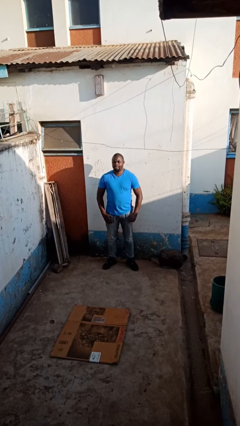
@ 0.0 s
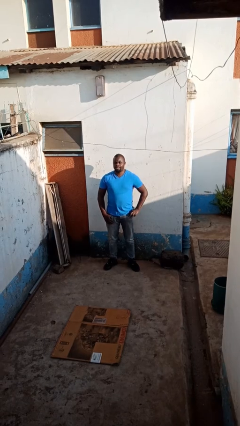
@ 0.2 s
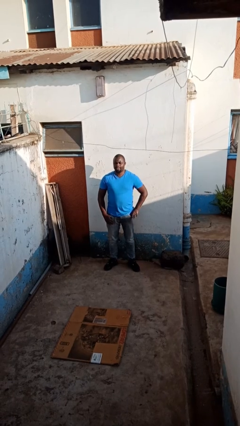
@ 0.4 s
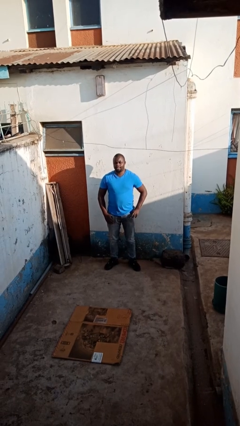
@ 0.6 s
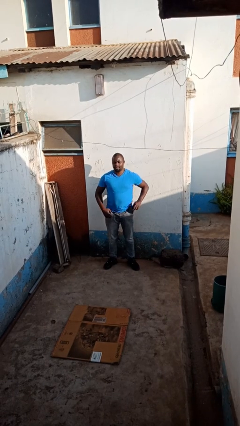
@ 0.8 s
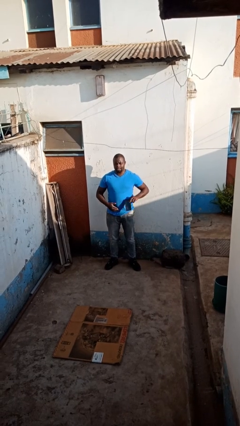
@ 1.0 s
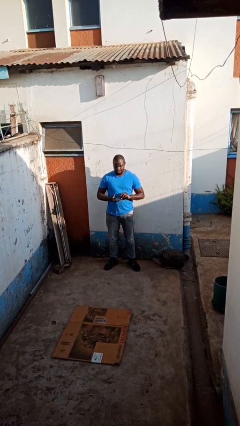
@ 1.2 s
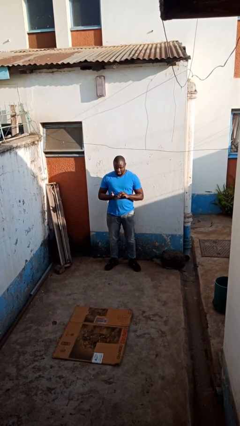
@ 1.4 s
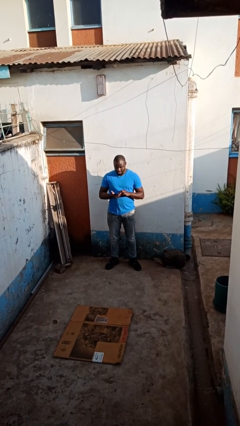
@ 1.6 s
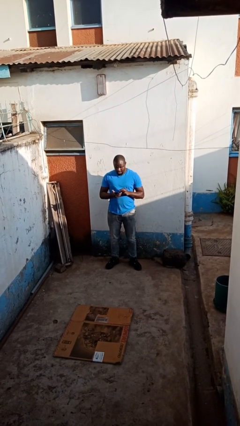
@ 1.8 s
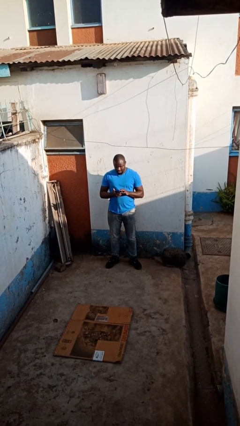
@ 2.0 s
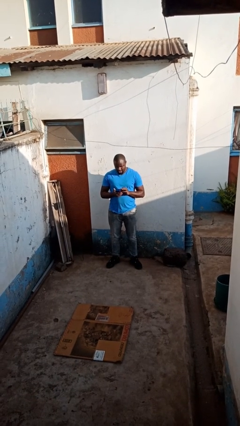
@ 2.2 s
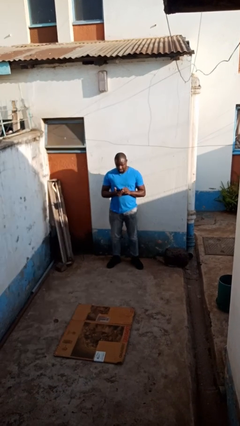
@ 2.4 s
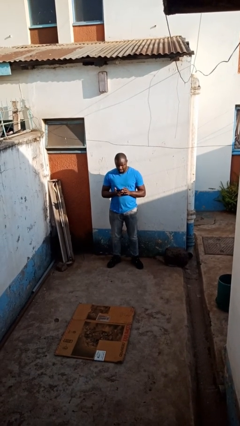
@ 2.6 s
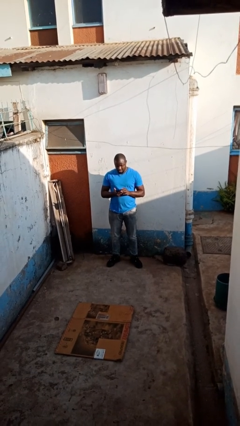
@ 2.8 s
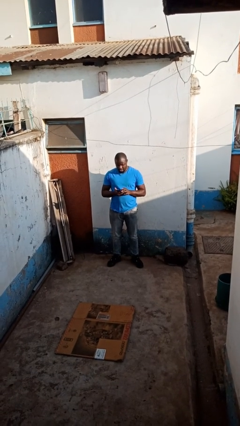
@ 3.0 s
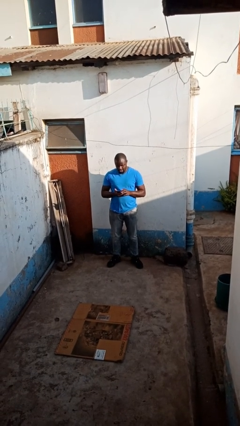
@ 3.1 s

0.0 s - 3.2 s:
person takes phone from pocket

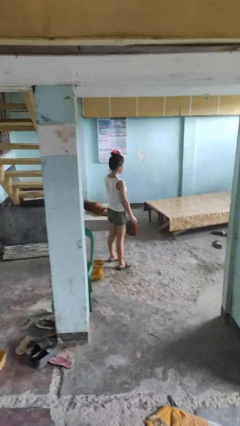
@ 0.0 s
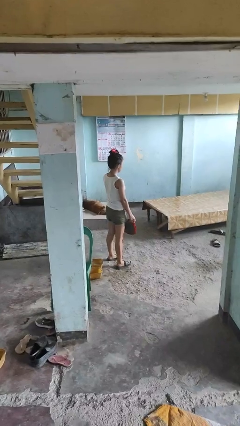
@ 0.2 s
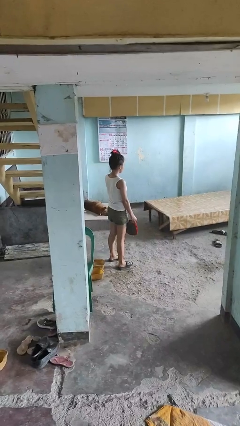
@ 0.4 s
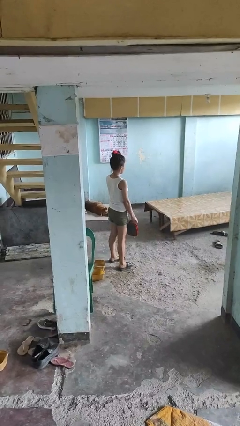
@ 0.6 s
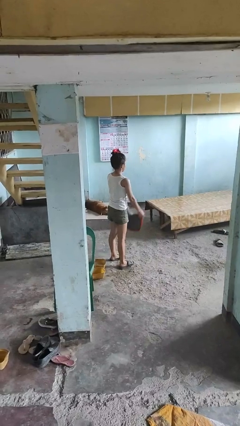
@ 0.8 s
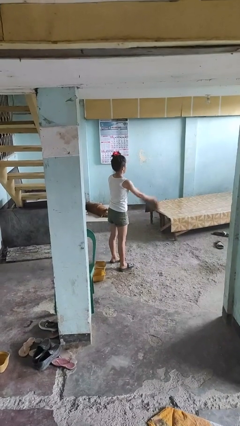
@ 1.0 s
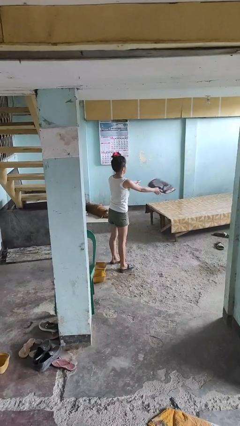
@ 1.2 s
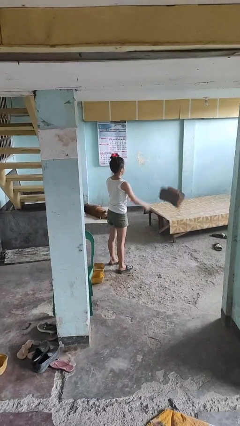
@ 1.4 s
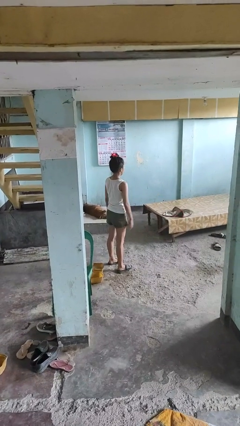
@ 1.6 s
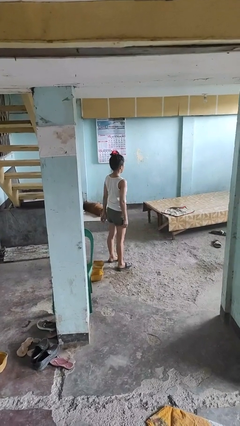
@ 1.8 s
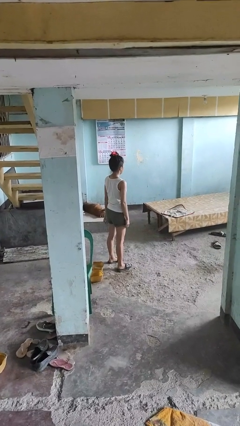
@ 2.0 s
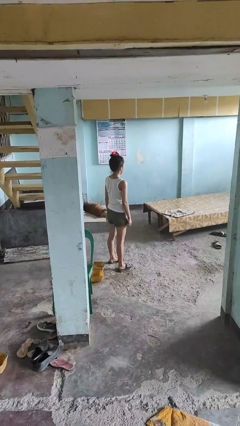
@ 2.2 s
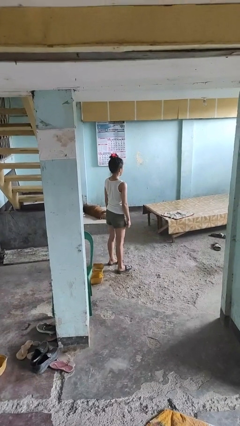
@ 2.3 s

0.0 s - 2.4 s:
person throws object on table

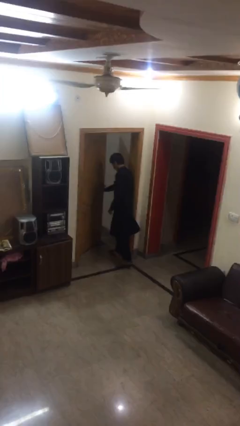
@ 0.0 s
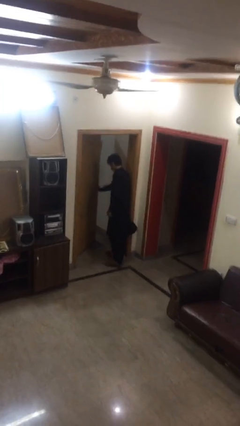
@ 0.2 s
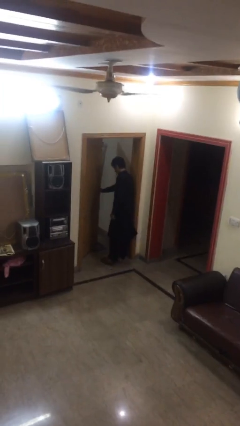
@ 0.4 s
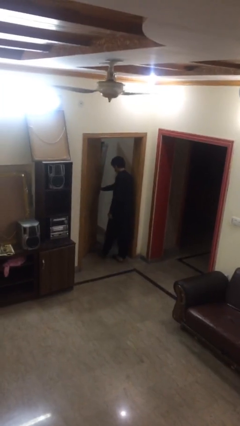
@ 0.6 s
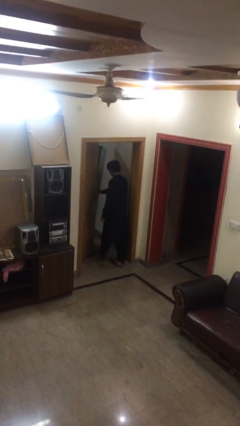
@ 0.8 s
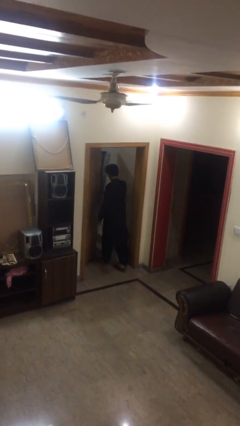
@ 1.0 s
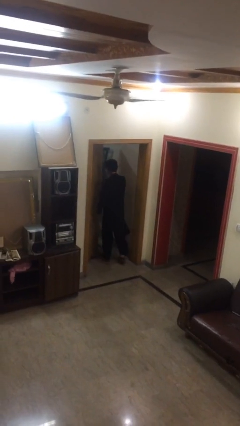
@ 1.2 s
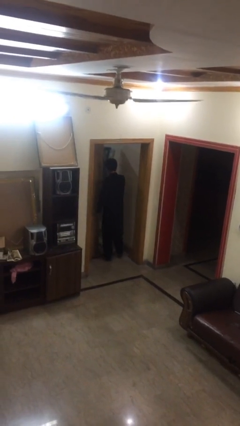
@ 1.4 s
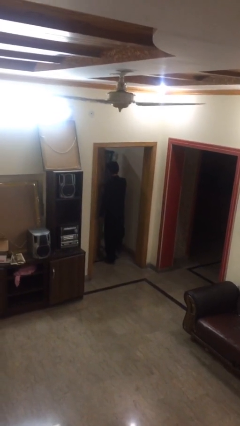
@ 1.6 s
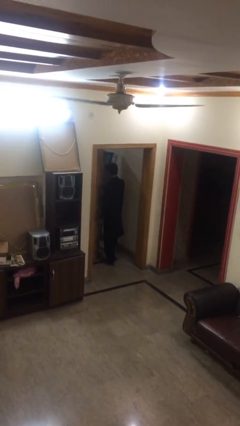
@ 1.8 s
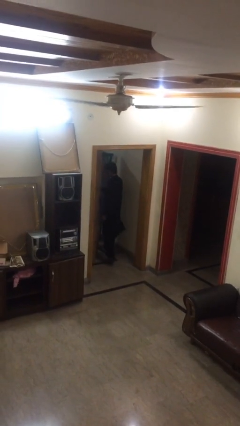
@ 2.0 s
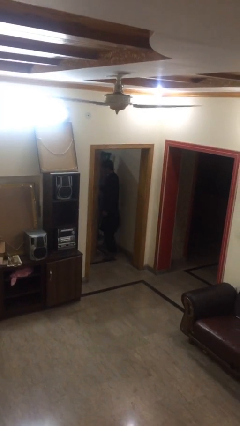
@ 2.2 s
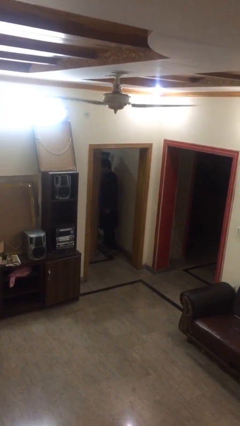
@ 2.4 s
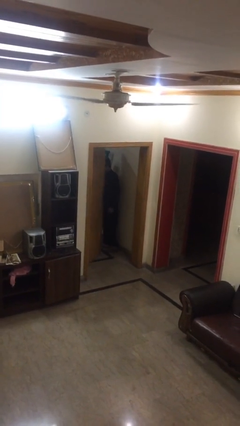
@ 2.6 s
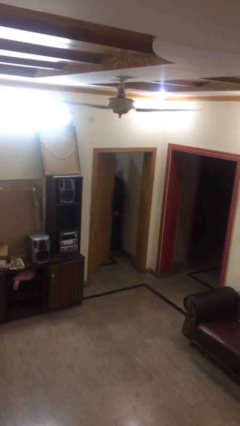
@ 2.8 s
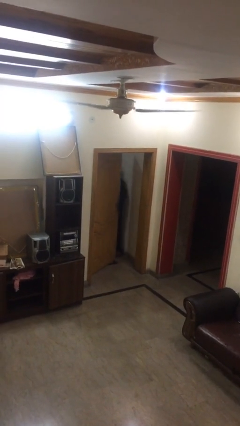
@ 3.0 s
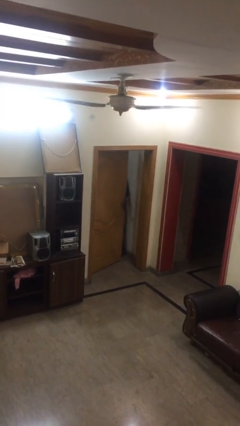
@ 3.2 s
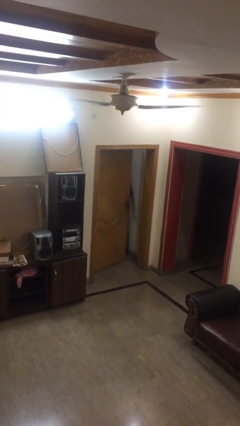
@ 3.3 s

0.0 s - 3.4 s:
person exits scene through structure

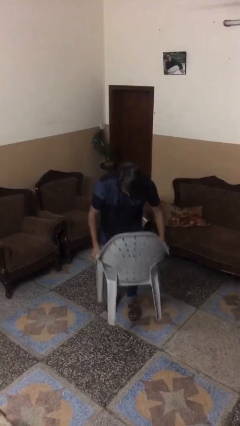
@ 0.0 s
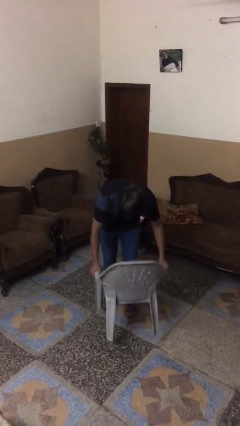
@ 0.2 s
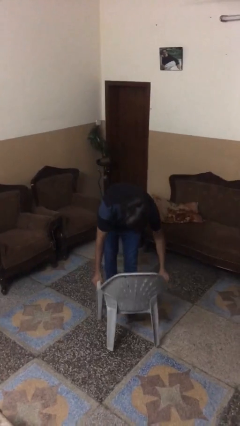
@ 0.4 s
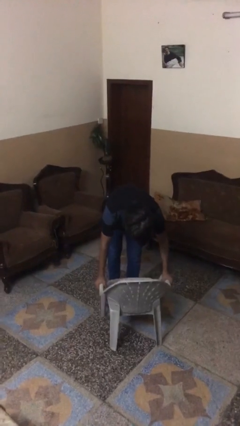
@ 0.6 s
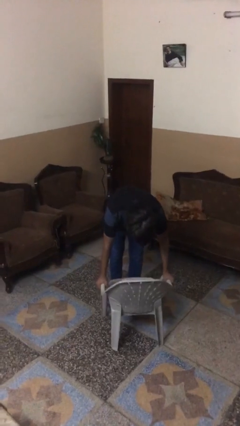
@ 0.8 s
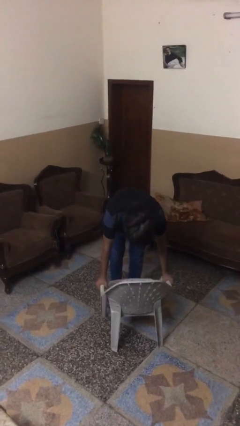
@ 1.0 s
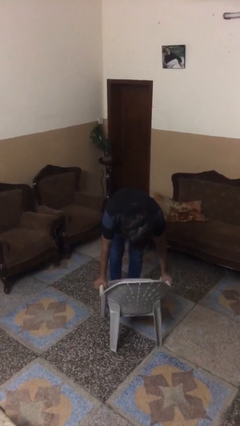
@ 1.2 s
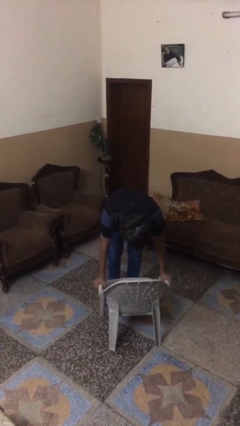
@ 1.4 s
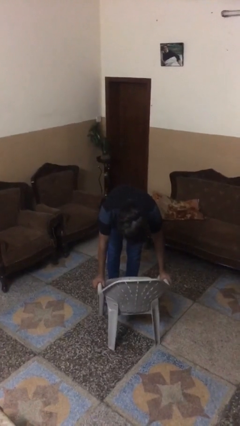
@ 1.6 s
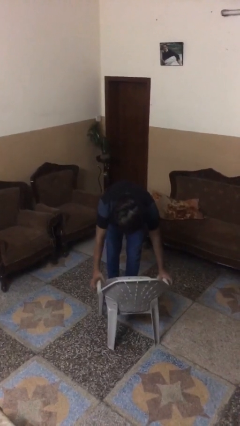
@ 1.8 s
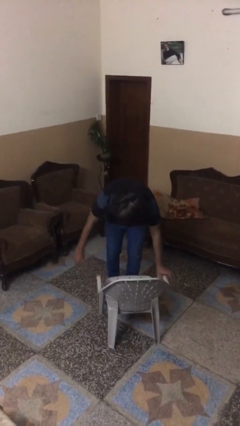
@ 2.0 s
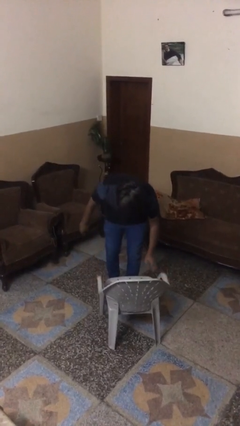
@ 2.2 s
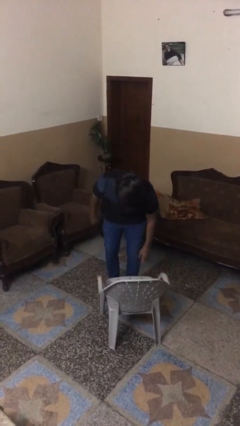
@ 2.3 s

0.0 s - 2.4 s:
person puts down object on floor

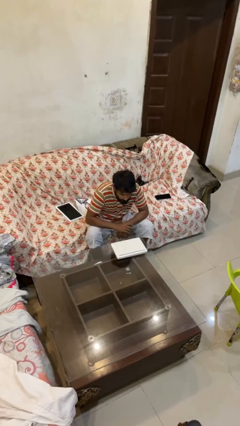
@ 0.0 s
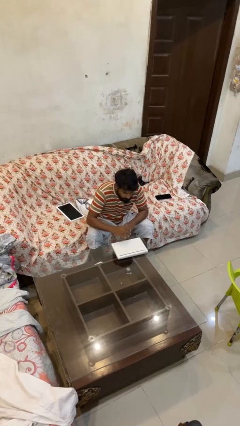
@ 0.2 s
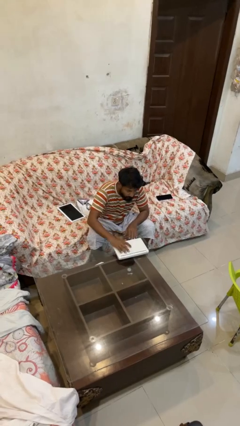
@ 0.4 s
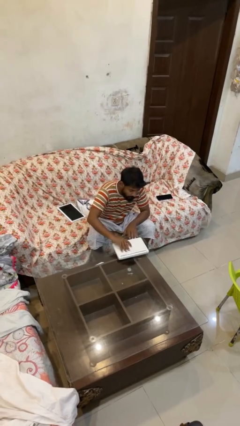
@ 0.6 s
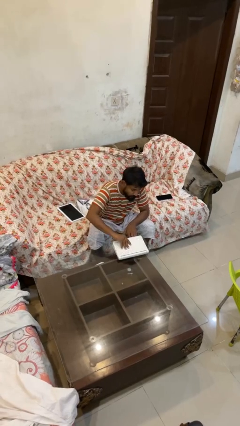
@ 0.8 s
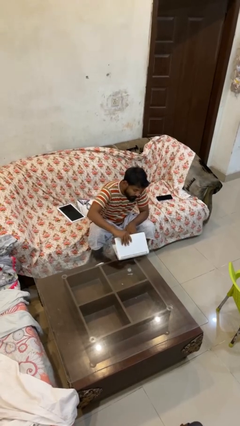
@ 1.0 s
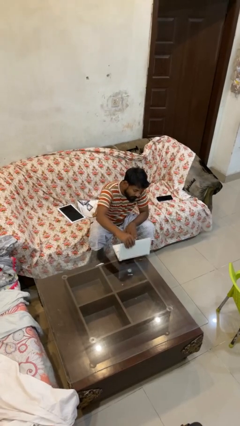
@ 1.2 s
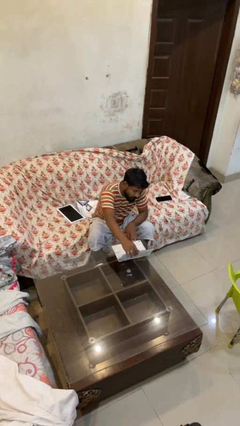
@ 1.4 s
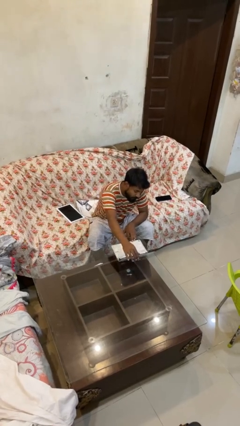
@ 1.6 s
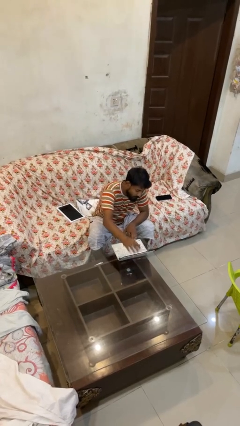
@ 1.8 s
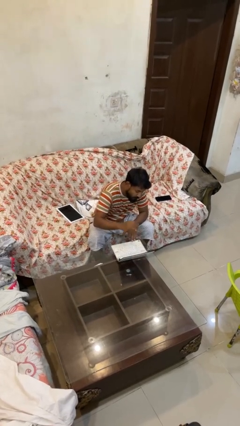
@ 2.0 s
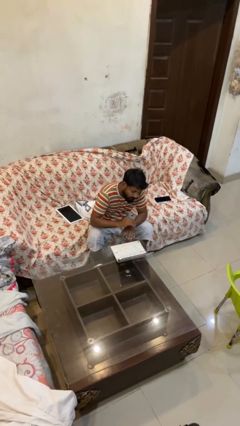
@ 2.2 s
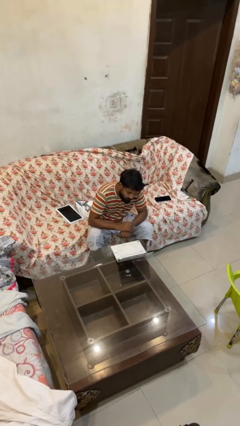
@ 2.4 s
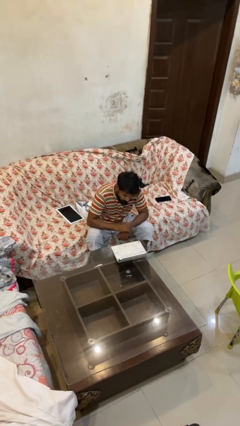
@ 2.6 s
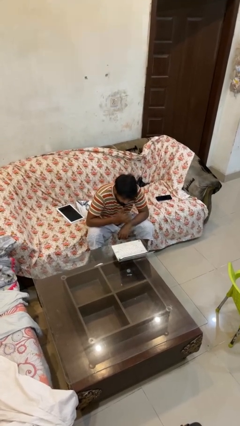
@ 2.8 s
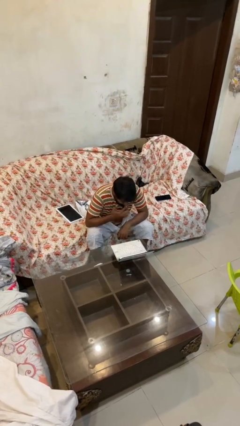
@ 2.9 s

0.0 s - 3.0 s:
person opens laptop

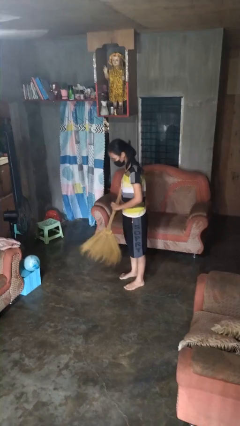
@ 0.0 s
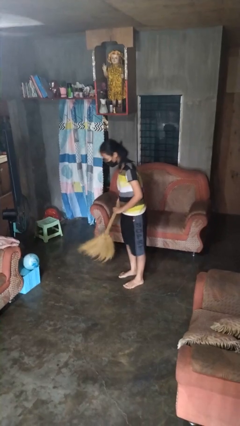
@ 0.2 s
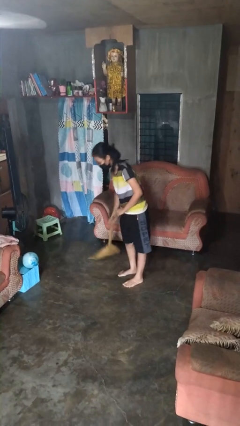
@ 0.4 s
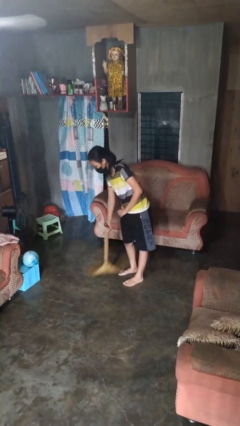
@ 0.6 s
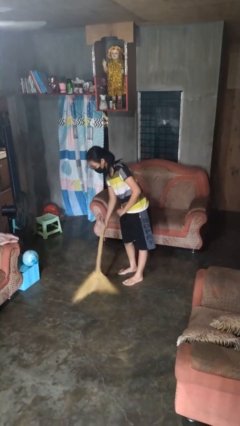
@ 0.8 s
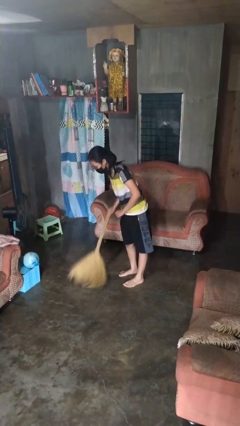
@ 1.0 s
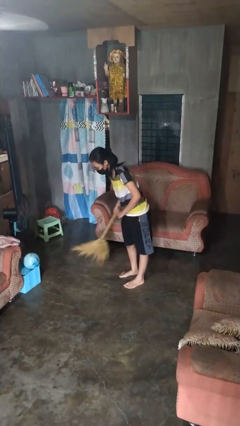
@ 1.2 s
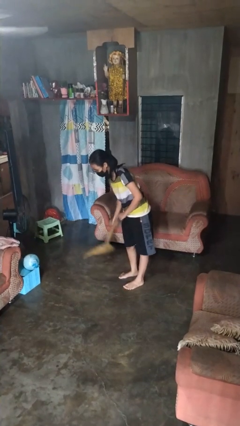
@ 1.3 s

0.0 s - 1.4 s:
person sweeps floor

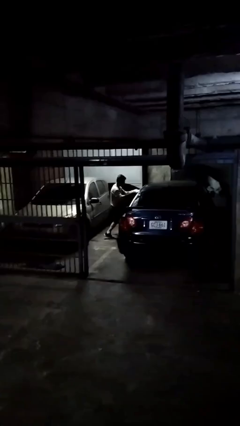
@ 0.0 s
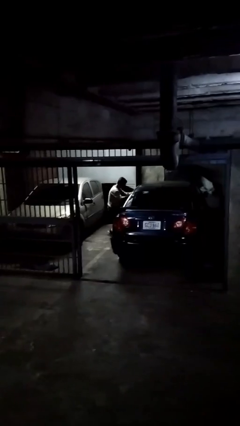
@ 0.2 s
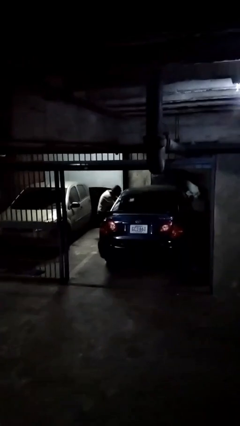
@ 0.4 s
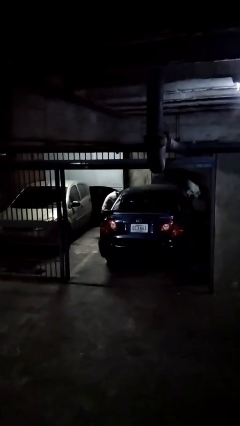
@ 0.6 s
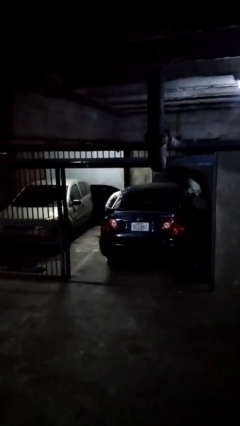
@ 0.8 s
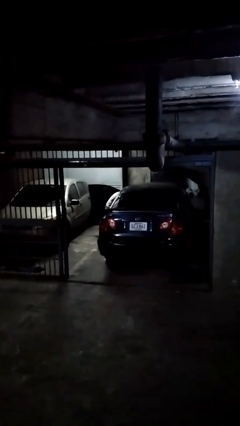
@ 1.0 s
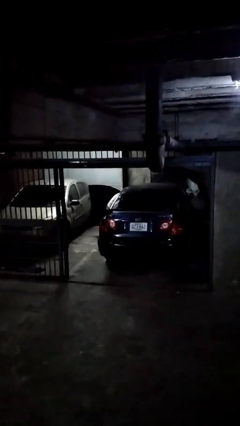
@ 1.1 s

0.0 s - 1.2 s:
person loads car
